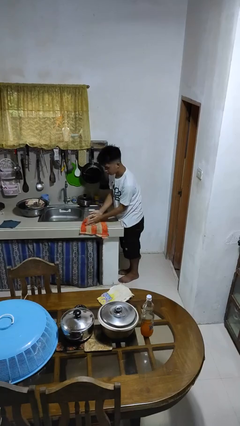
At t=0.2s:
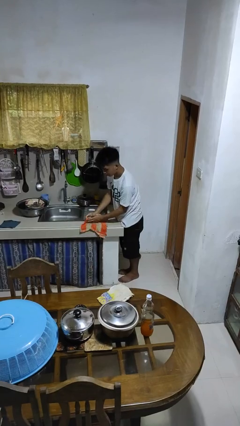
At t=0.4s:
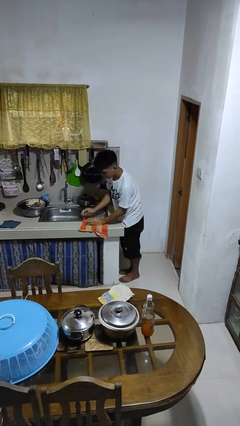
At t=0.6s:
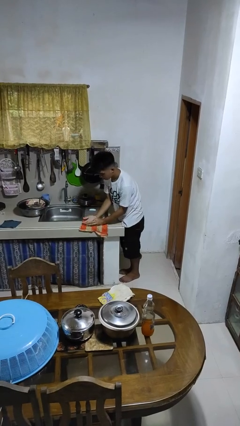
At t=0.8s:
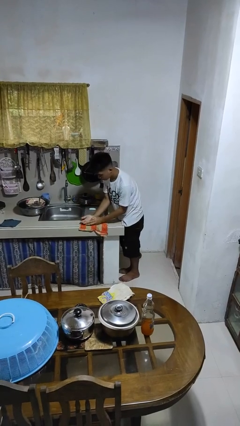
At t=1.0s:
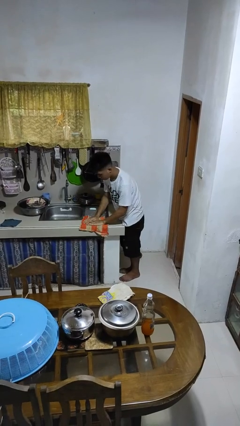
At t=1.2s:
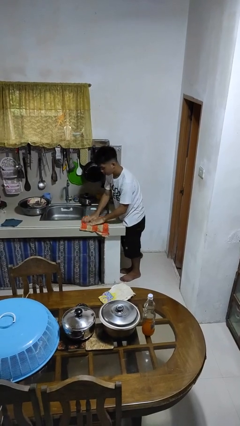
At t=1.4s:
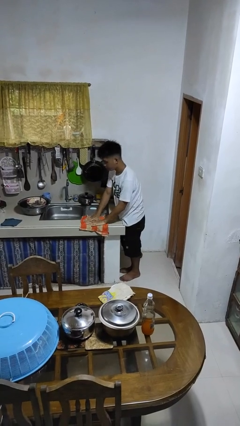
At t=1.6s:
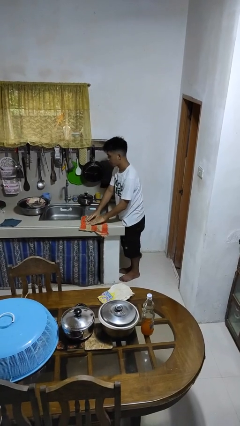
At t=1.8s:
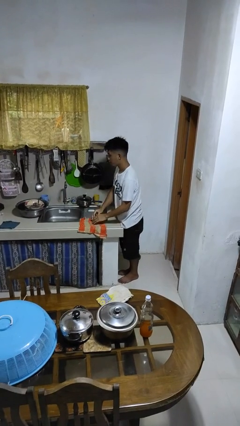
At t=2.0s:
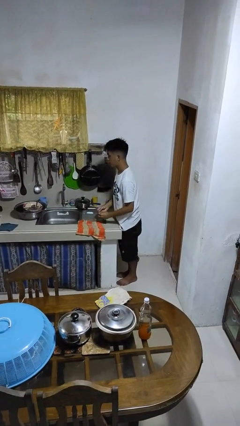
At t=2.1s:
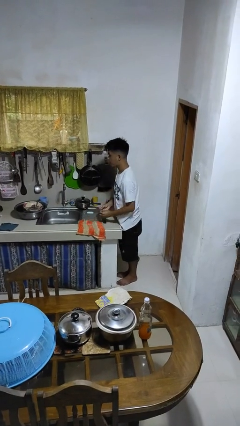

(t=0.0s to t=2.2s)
person dries hands with towel

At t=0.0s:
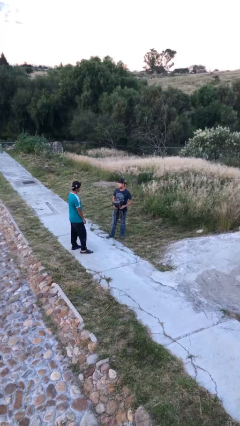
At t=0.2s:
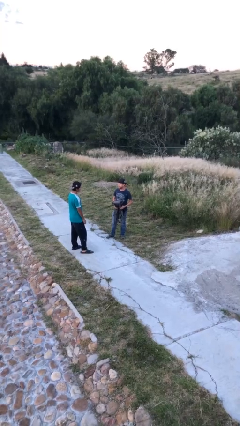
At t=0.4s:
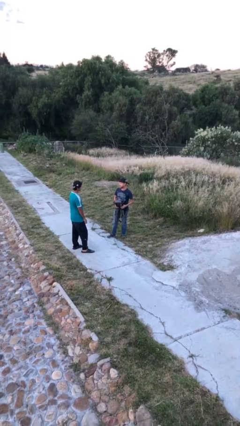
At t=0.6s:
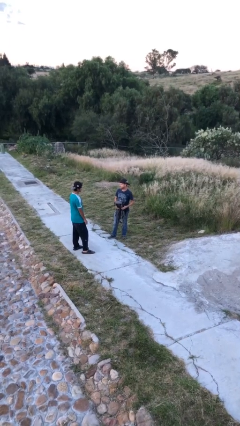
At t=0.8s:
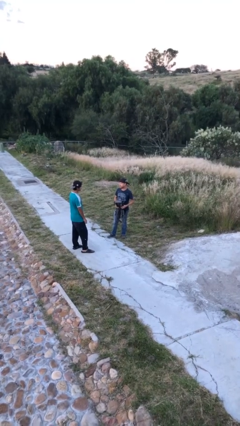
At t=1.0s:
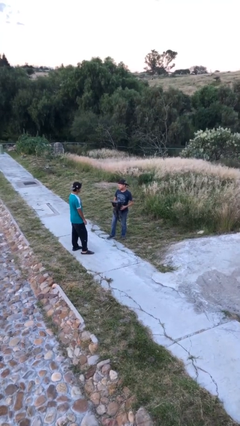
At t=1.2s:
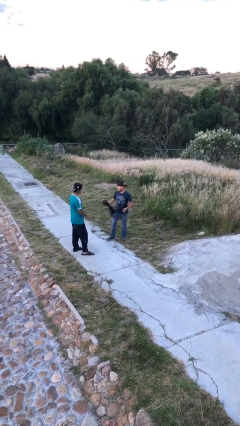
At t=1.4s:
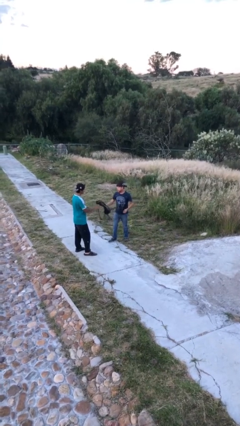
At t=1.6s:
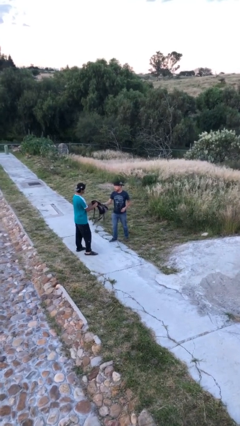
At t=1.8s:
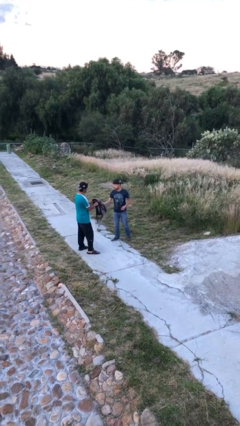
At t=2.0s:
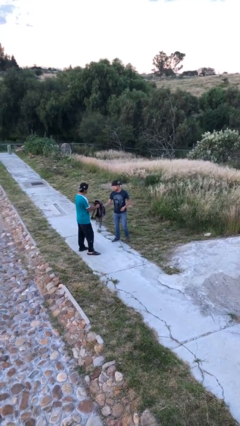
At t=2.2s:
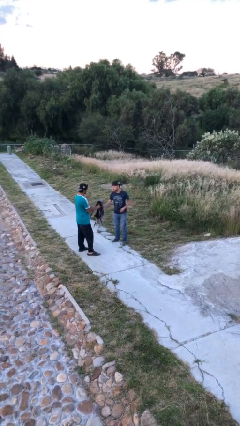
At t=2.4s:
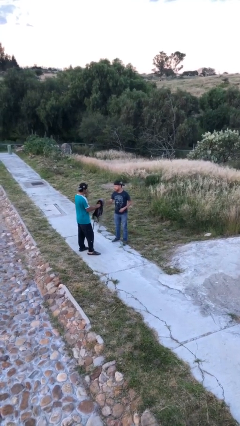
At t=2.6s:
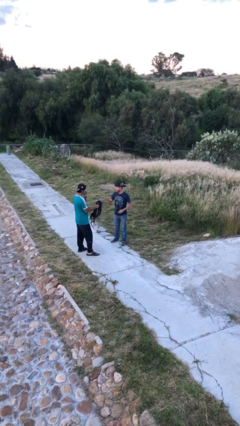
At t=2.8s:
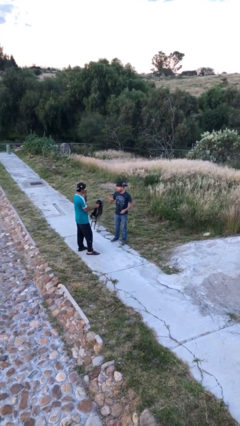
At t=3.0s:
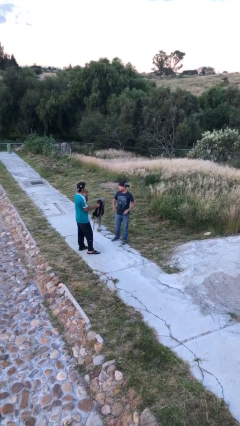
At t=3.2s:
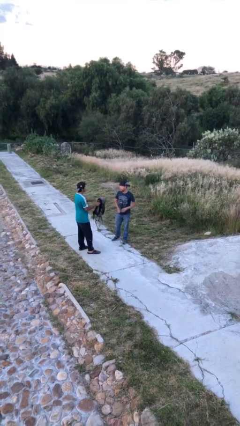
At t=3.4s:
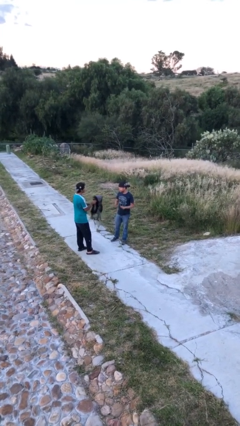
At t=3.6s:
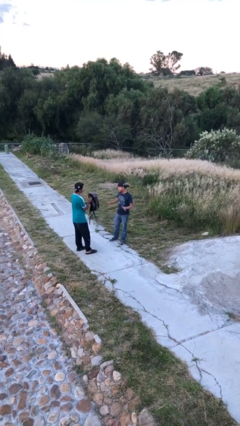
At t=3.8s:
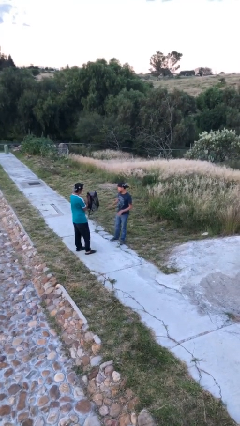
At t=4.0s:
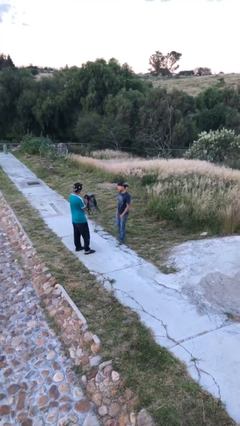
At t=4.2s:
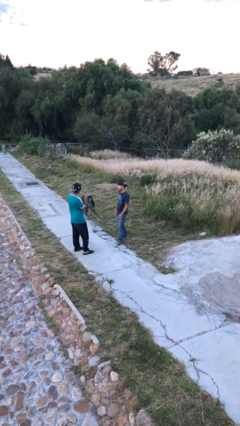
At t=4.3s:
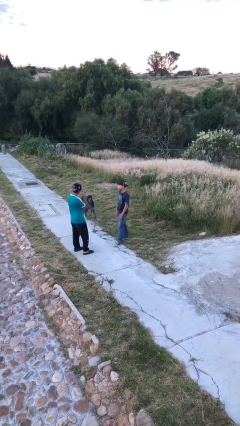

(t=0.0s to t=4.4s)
person transfers object to person

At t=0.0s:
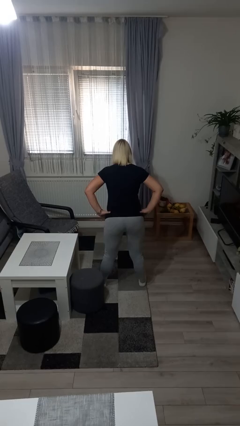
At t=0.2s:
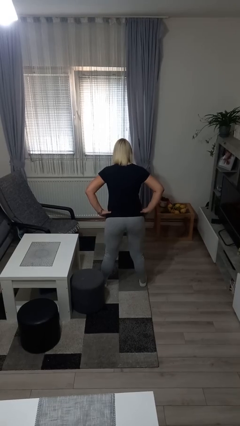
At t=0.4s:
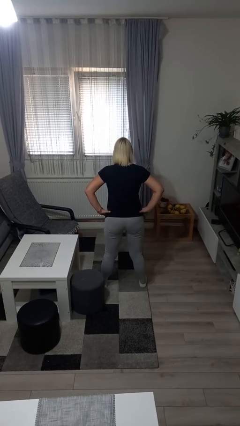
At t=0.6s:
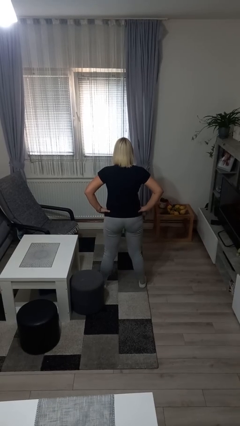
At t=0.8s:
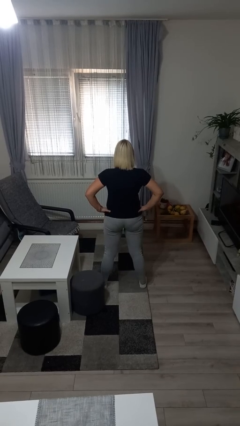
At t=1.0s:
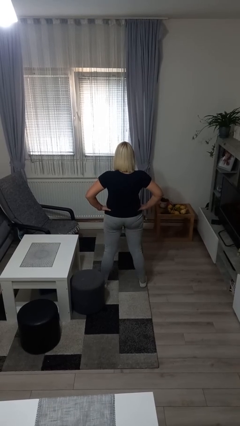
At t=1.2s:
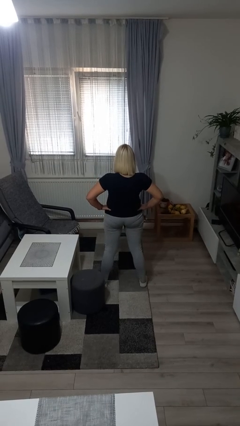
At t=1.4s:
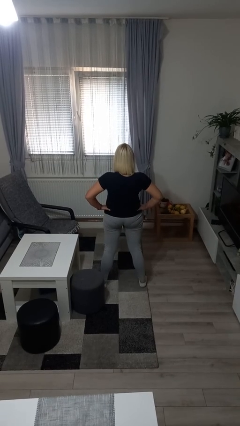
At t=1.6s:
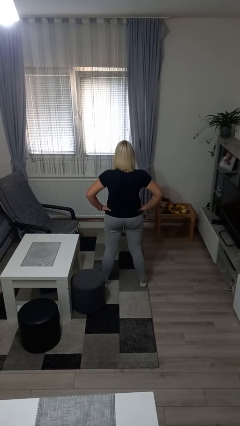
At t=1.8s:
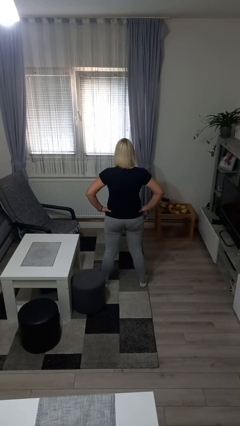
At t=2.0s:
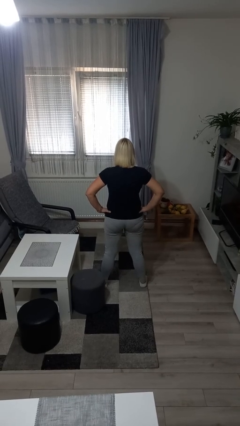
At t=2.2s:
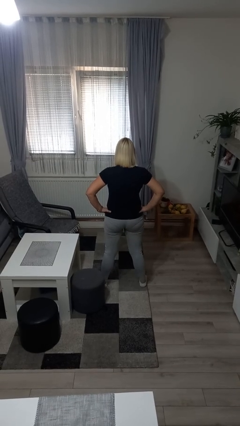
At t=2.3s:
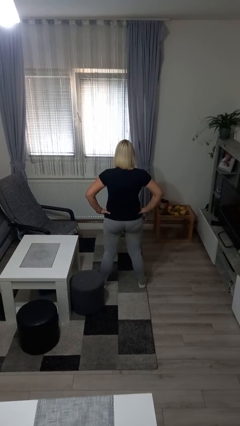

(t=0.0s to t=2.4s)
person wiggles hips

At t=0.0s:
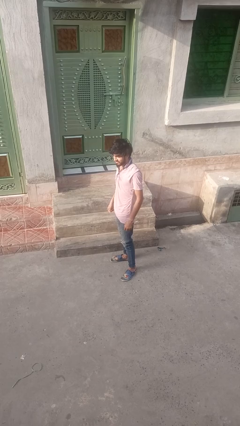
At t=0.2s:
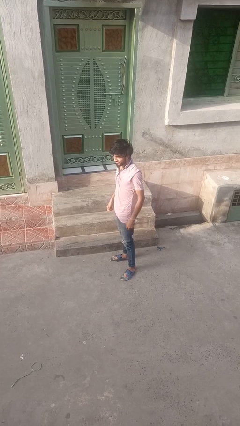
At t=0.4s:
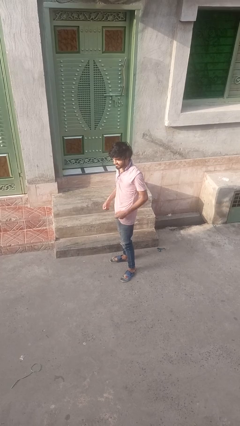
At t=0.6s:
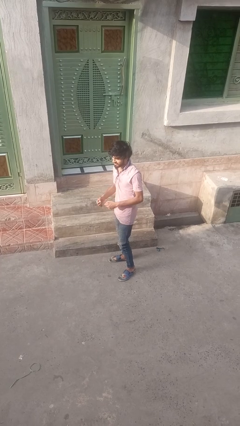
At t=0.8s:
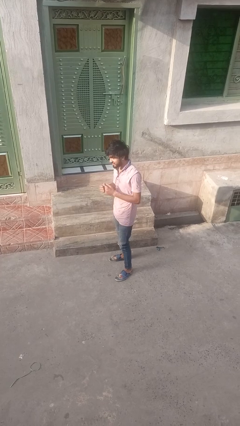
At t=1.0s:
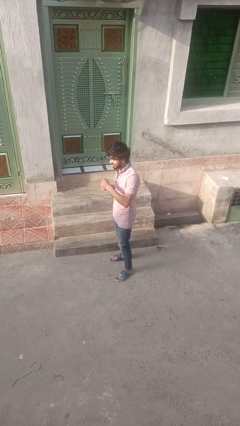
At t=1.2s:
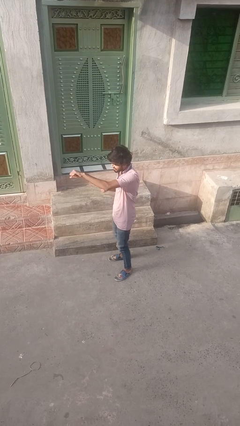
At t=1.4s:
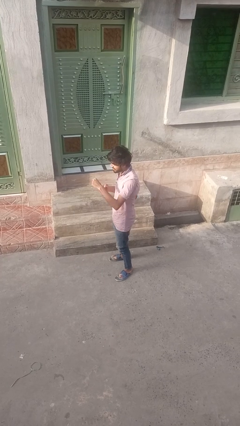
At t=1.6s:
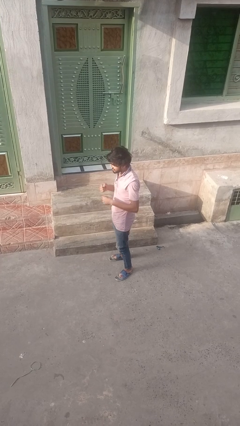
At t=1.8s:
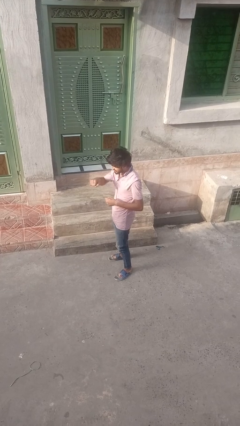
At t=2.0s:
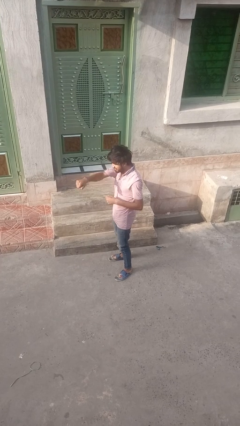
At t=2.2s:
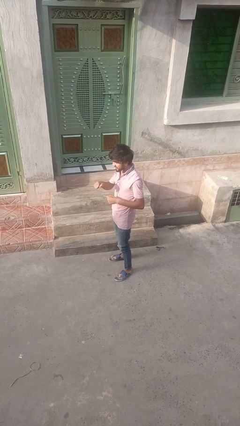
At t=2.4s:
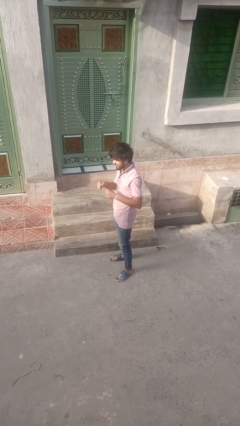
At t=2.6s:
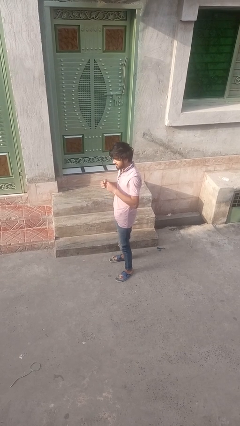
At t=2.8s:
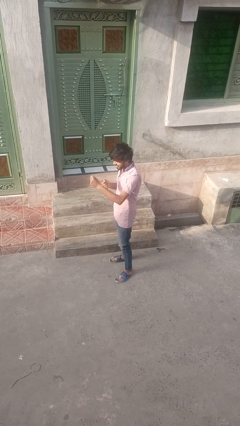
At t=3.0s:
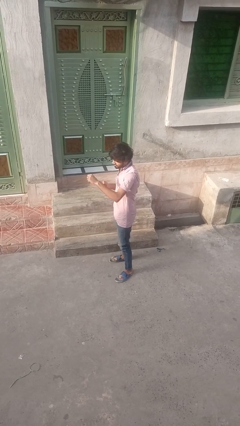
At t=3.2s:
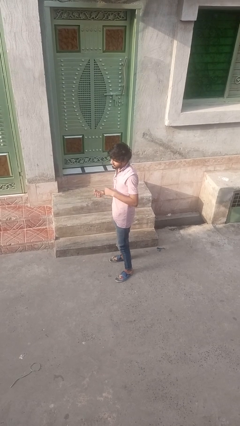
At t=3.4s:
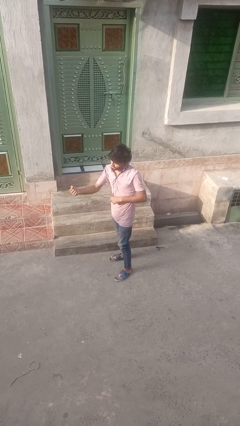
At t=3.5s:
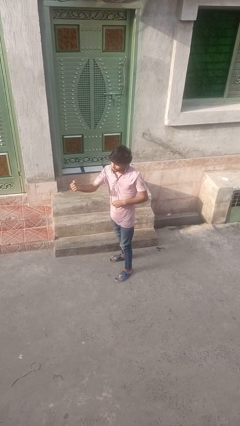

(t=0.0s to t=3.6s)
person punches

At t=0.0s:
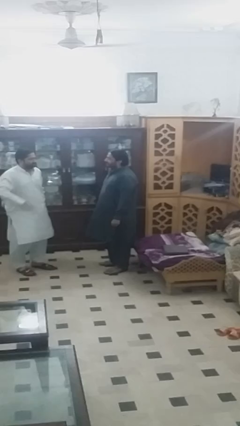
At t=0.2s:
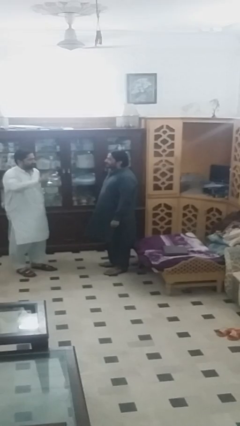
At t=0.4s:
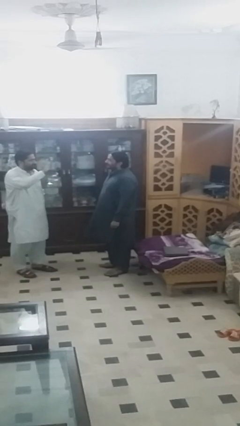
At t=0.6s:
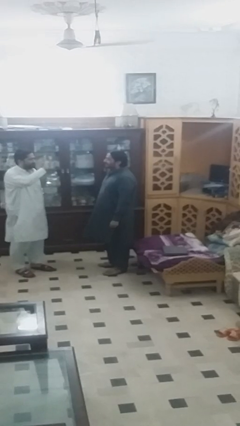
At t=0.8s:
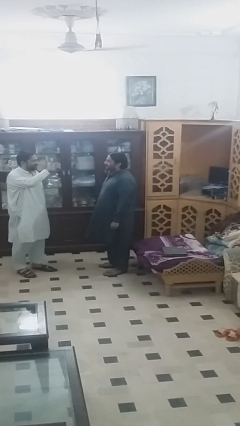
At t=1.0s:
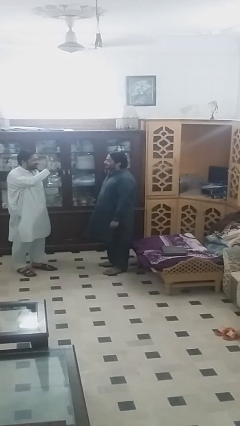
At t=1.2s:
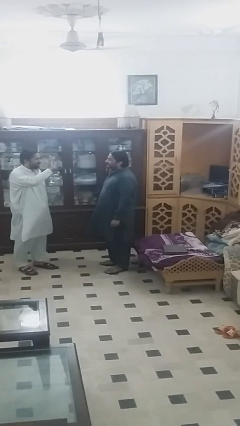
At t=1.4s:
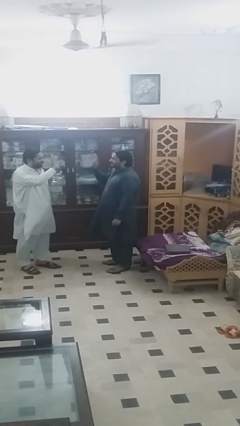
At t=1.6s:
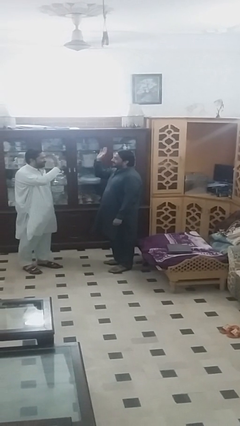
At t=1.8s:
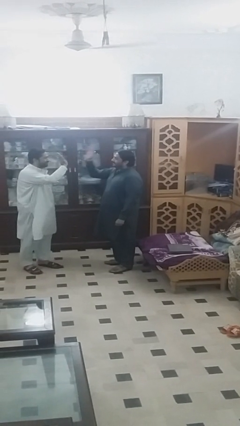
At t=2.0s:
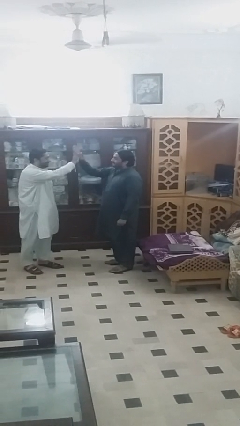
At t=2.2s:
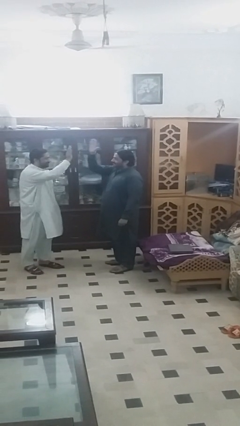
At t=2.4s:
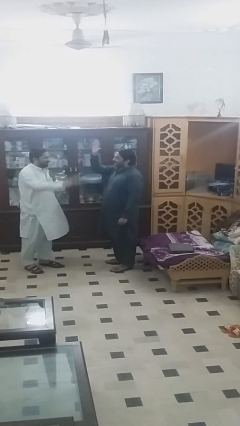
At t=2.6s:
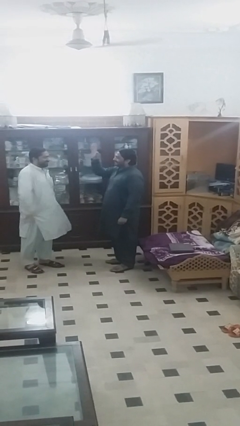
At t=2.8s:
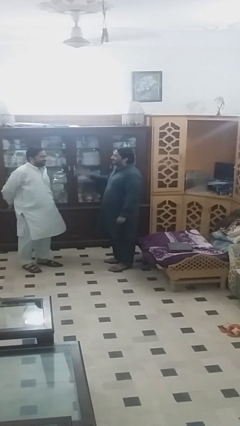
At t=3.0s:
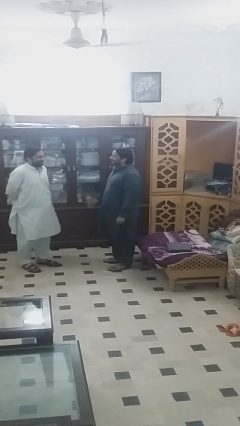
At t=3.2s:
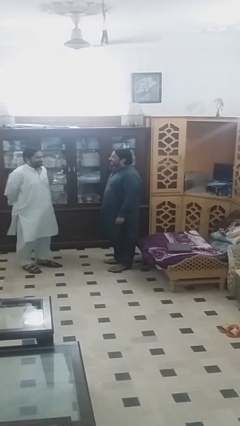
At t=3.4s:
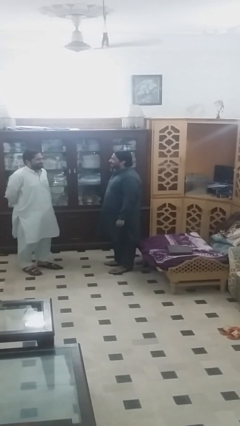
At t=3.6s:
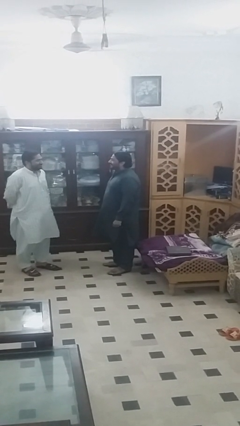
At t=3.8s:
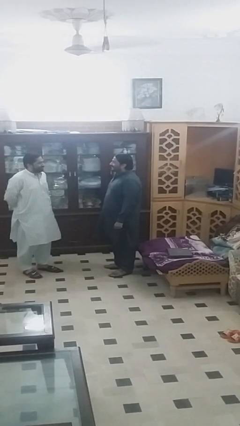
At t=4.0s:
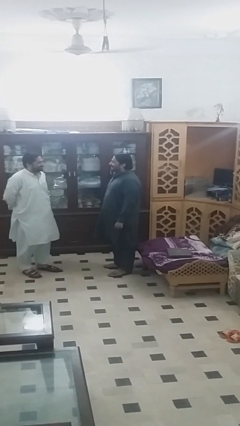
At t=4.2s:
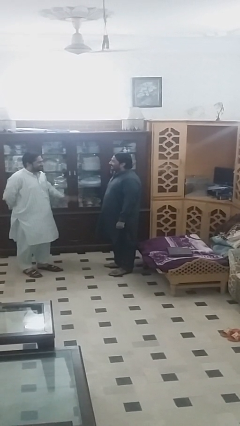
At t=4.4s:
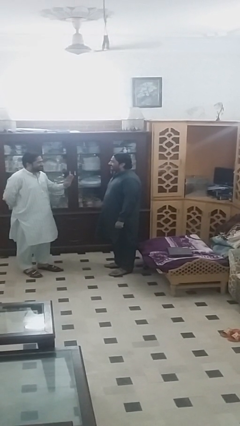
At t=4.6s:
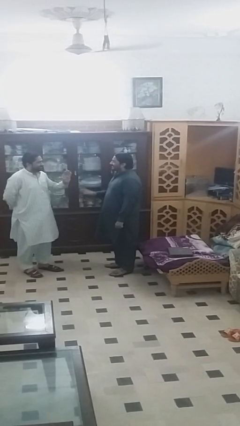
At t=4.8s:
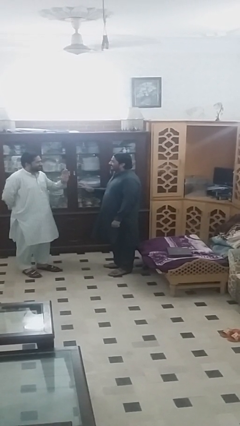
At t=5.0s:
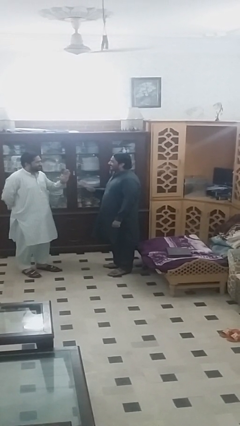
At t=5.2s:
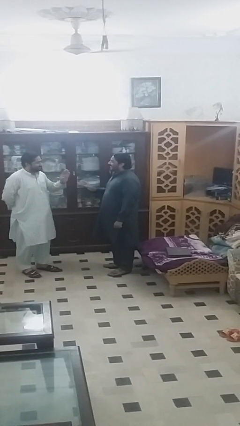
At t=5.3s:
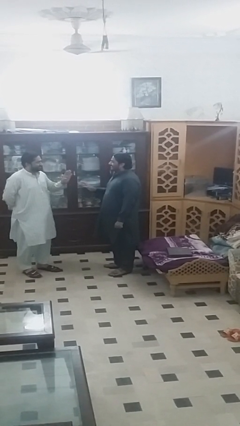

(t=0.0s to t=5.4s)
person highfives hand
